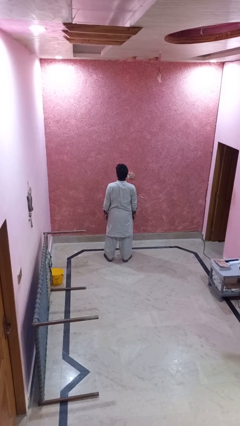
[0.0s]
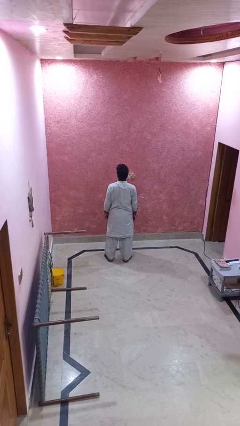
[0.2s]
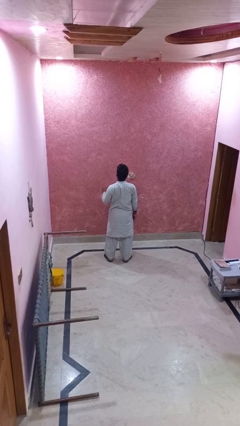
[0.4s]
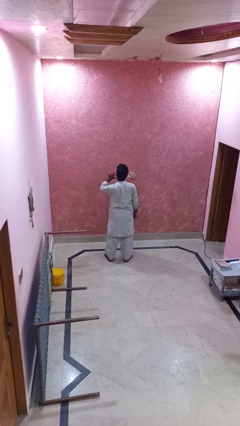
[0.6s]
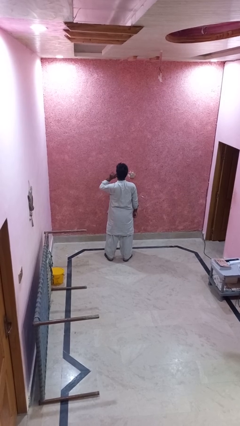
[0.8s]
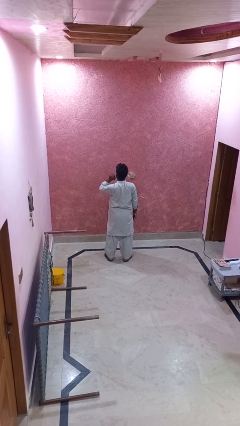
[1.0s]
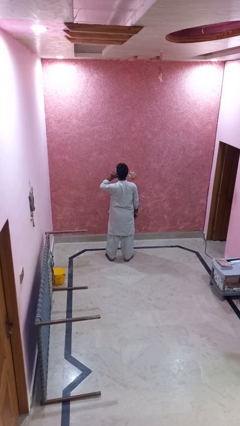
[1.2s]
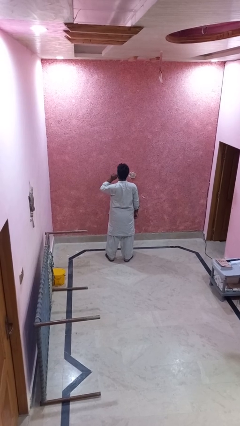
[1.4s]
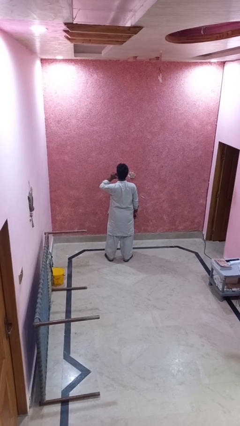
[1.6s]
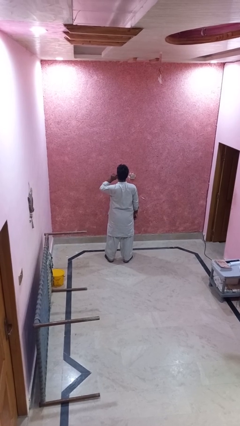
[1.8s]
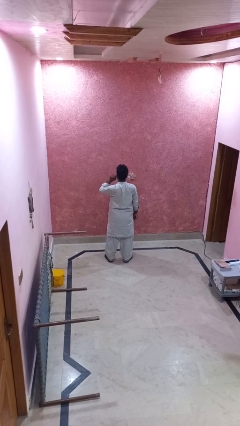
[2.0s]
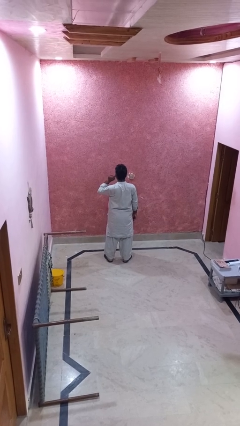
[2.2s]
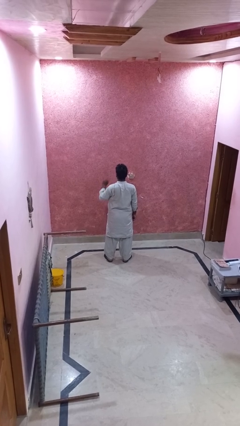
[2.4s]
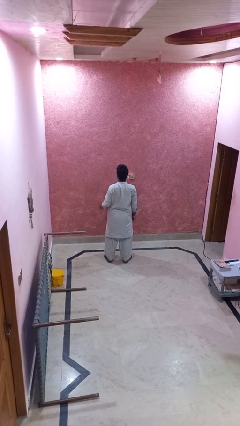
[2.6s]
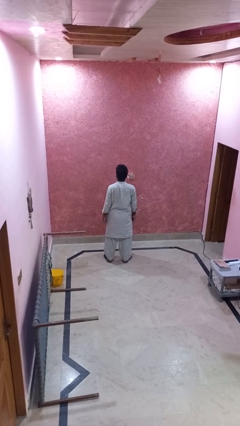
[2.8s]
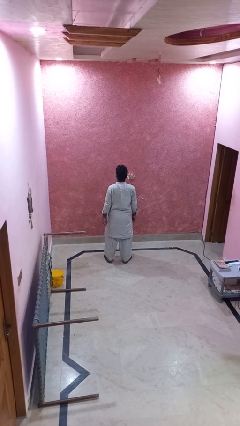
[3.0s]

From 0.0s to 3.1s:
person touches earlobe

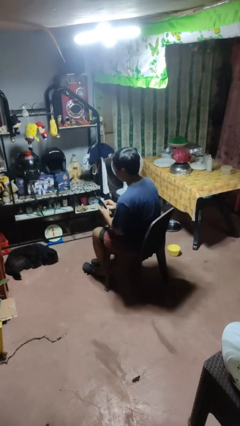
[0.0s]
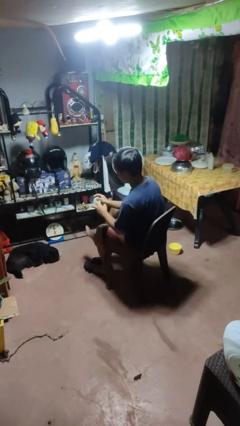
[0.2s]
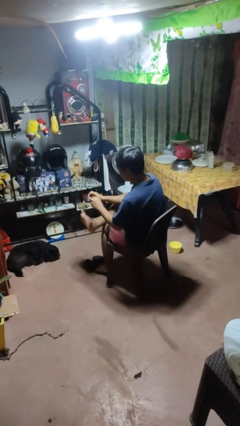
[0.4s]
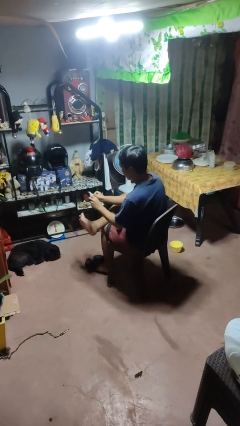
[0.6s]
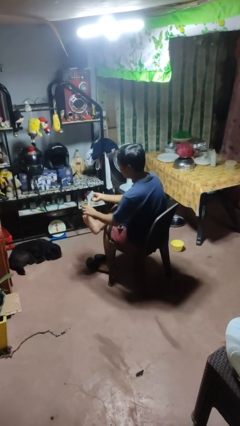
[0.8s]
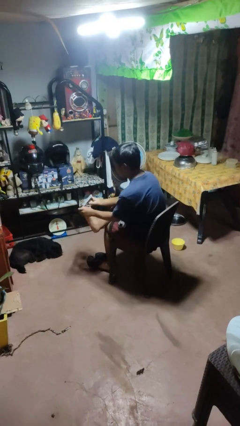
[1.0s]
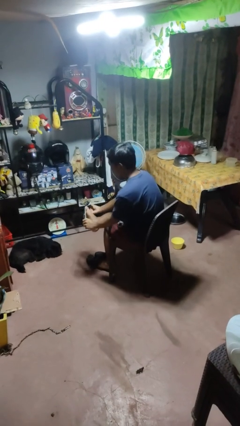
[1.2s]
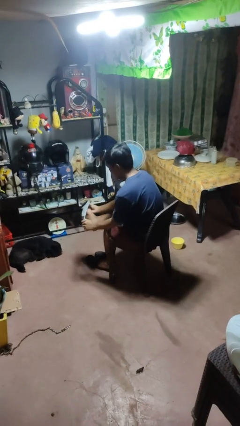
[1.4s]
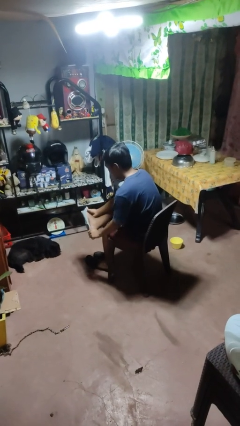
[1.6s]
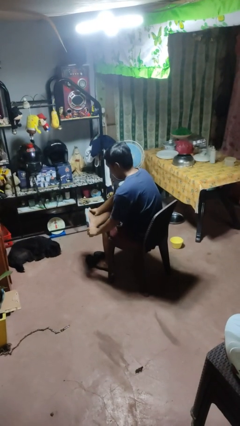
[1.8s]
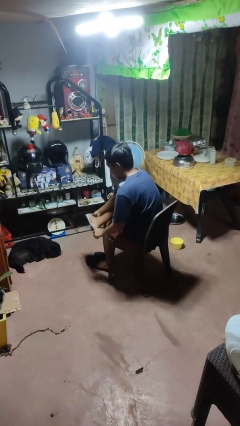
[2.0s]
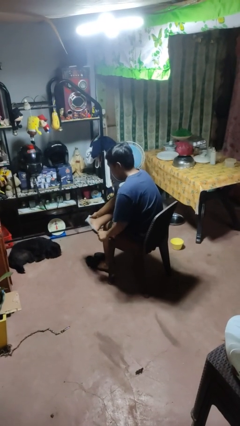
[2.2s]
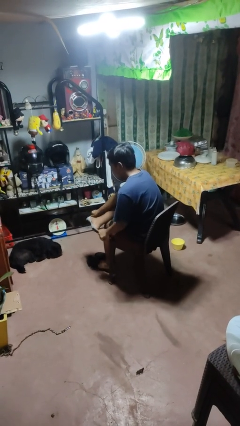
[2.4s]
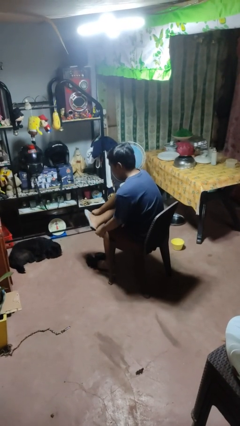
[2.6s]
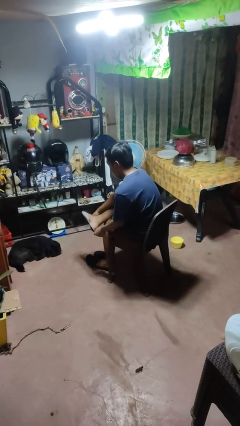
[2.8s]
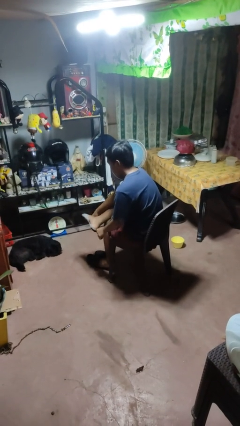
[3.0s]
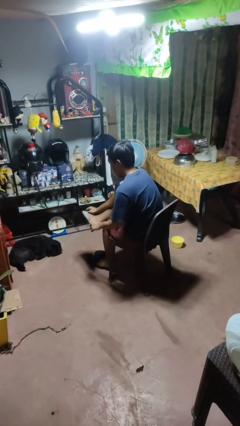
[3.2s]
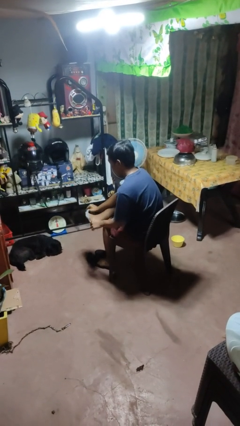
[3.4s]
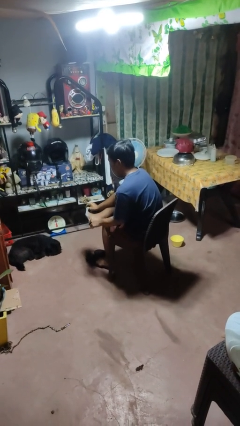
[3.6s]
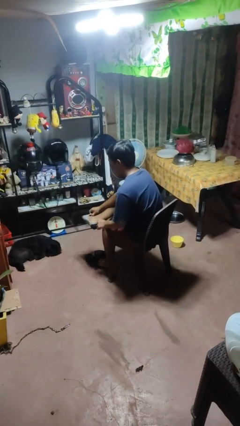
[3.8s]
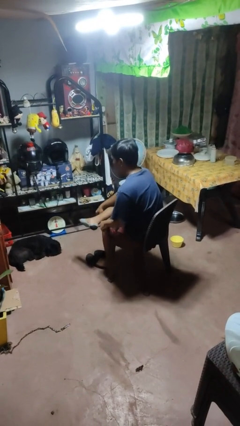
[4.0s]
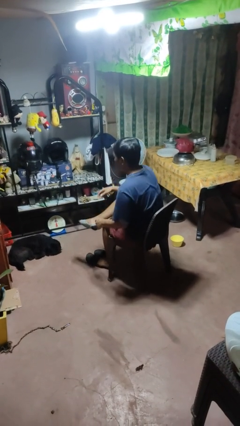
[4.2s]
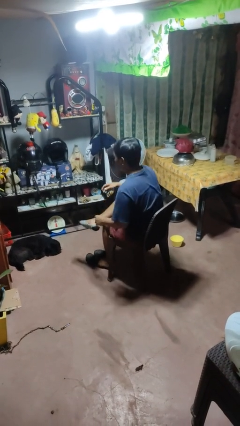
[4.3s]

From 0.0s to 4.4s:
person puts on socks

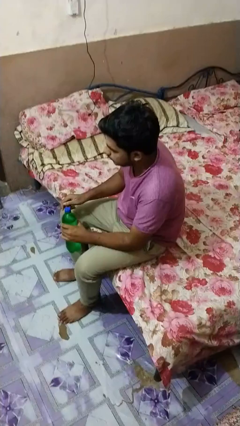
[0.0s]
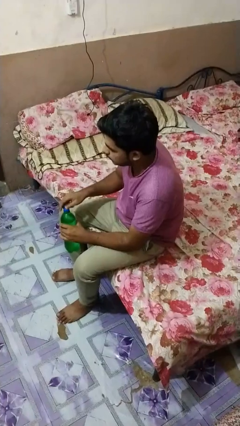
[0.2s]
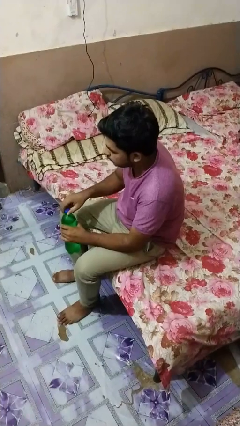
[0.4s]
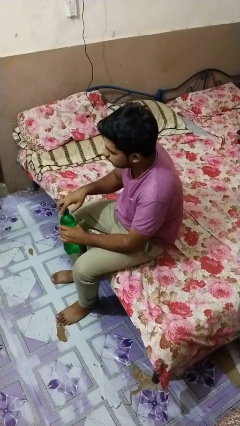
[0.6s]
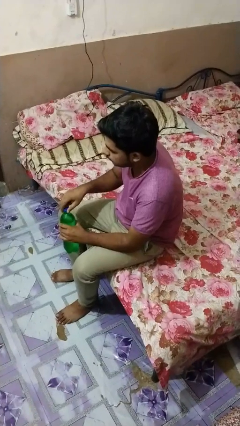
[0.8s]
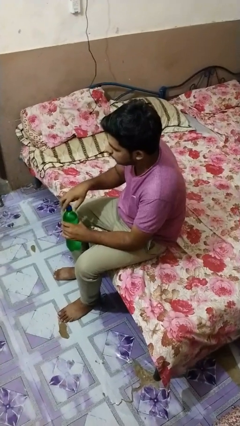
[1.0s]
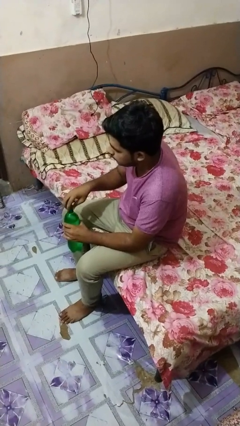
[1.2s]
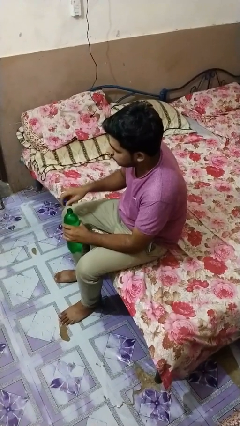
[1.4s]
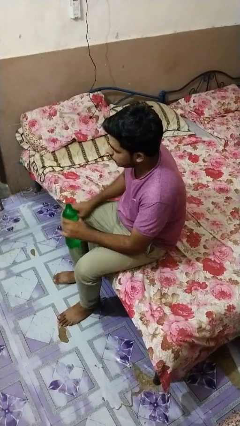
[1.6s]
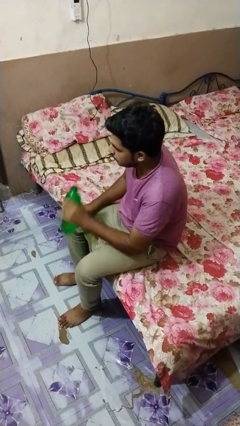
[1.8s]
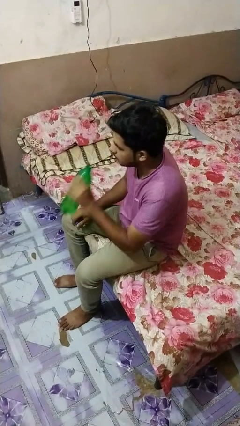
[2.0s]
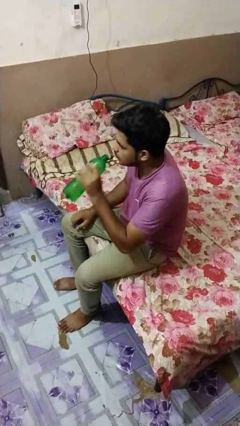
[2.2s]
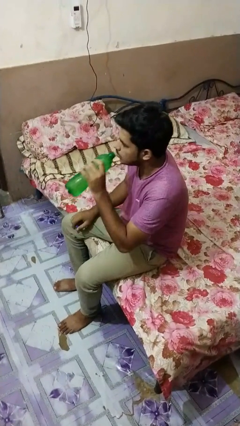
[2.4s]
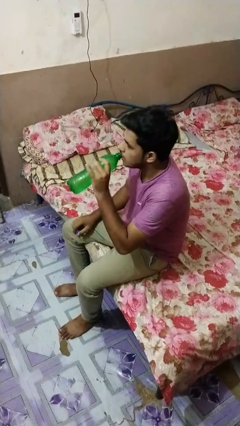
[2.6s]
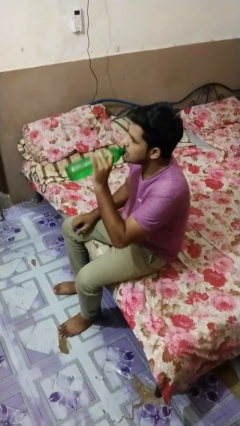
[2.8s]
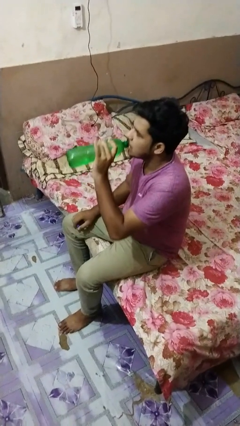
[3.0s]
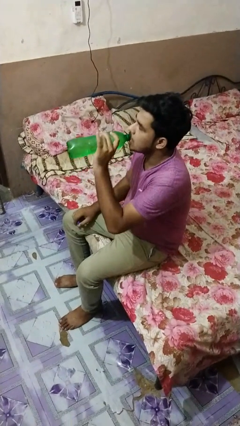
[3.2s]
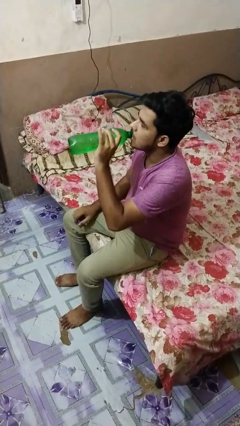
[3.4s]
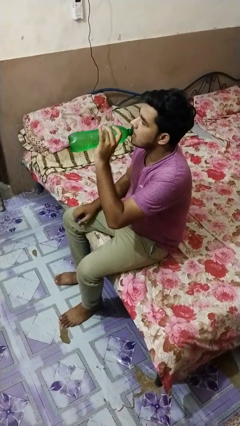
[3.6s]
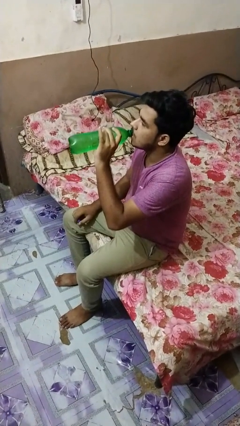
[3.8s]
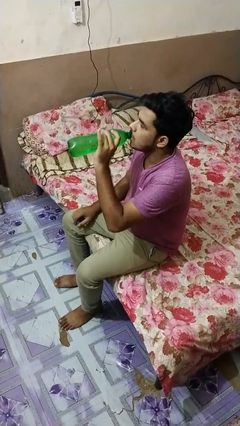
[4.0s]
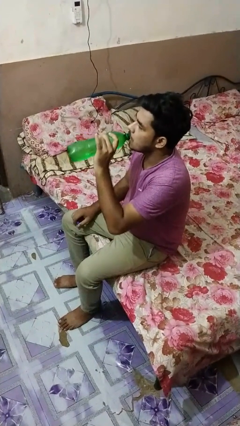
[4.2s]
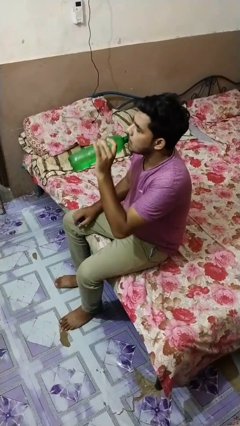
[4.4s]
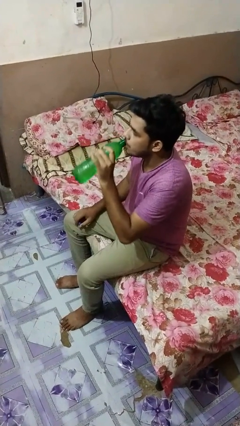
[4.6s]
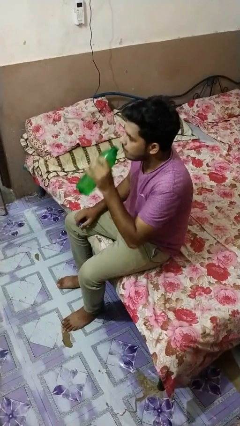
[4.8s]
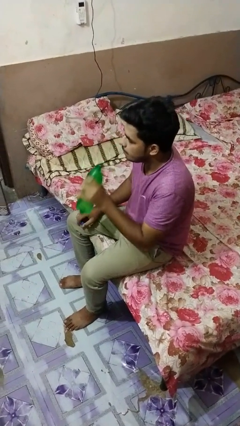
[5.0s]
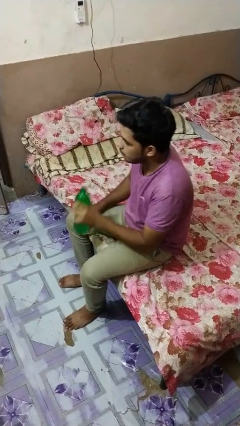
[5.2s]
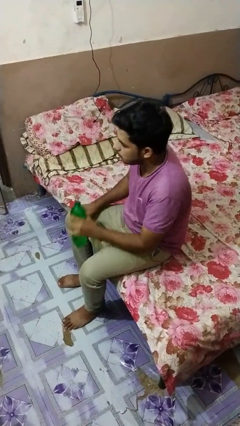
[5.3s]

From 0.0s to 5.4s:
person drinks from bottle

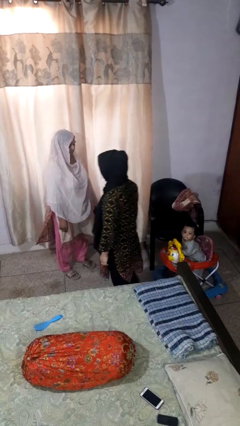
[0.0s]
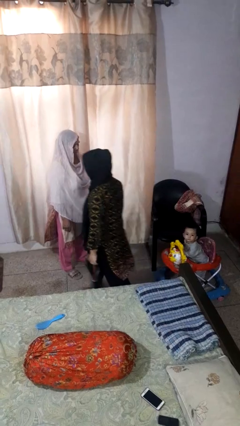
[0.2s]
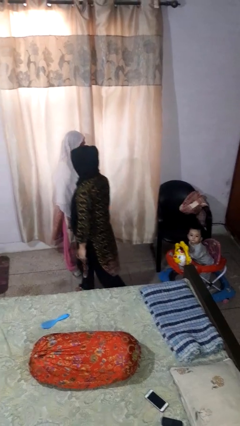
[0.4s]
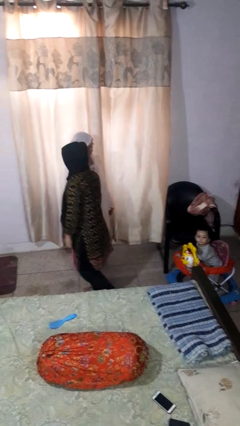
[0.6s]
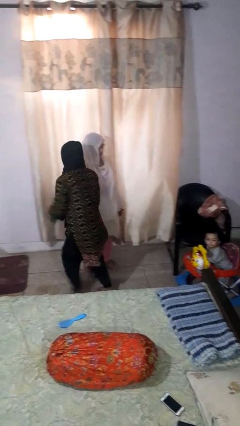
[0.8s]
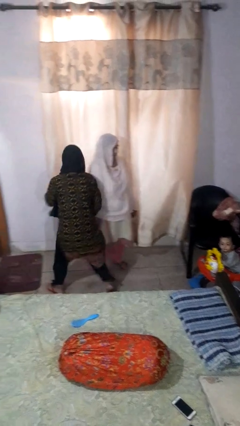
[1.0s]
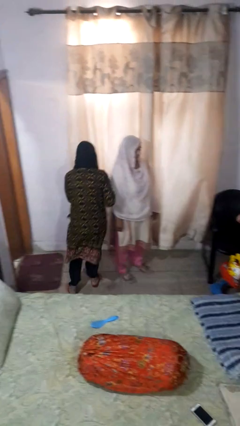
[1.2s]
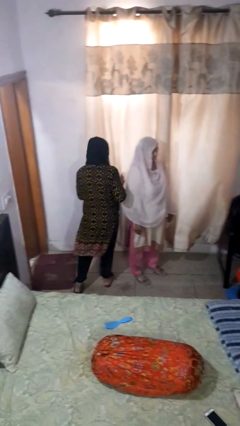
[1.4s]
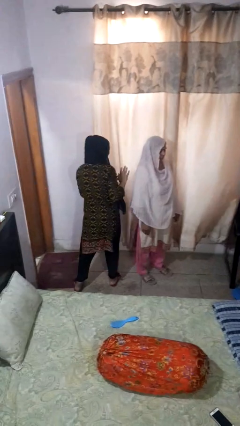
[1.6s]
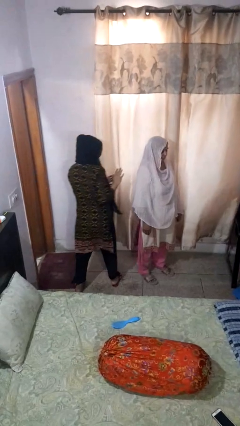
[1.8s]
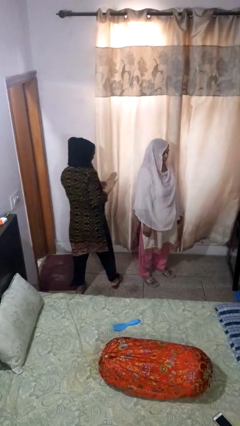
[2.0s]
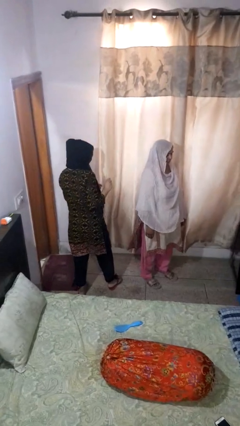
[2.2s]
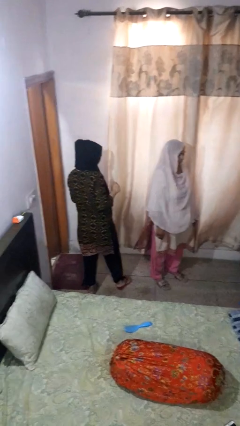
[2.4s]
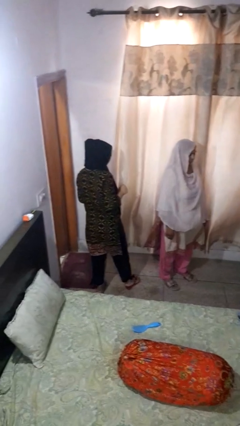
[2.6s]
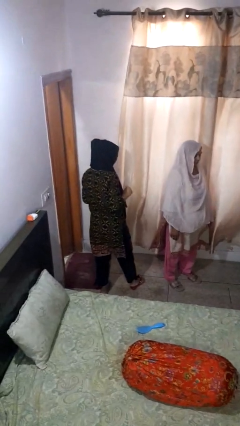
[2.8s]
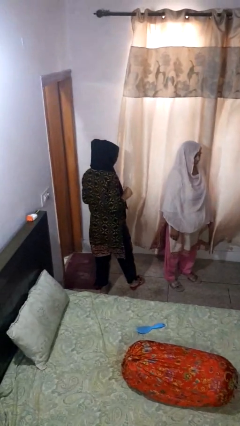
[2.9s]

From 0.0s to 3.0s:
person bumps into person

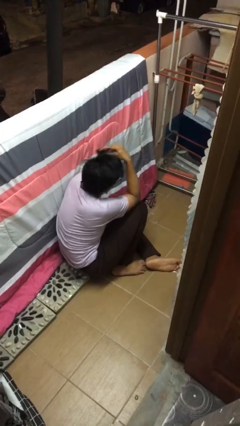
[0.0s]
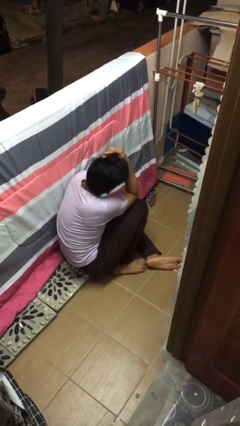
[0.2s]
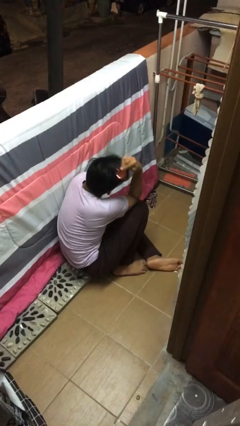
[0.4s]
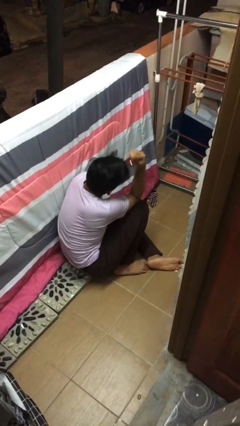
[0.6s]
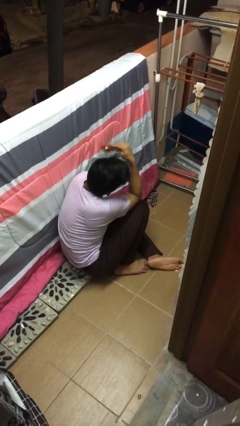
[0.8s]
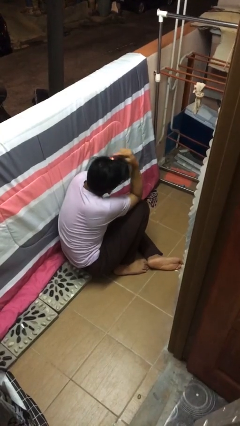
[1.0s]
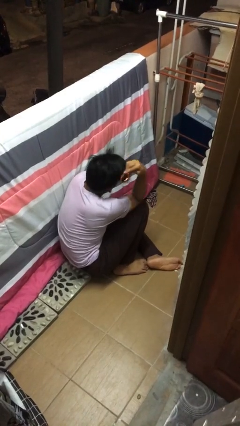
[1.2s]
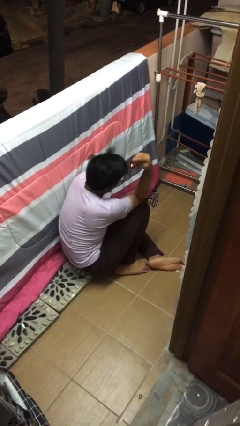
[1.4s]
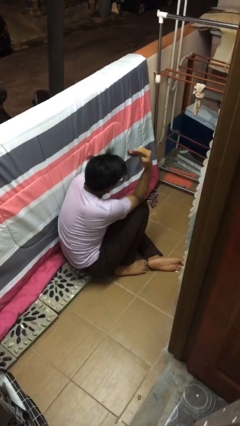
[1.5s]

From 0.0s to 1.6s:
person brushes hair
